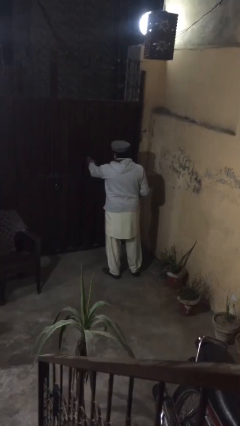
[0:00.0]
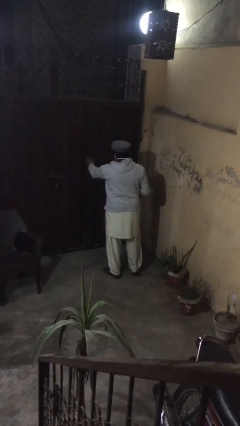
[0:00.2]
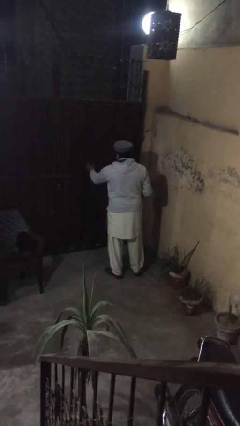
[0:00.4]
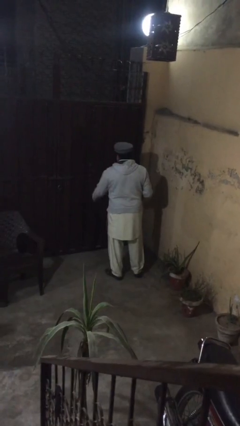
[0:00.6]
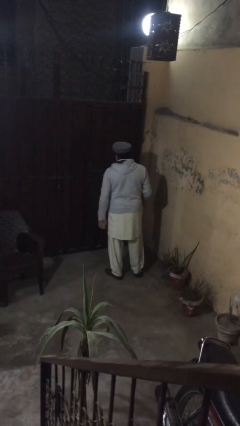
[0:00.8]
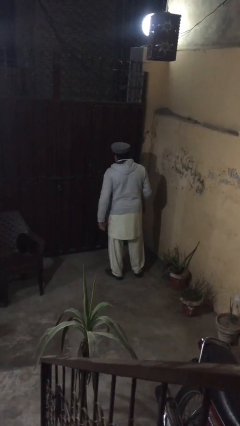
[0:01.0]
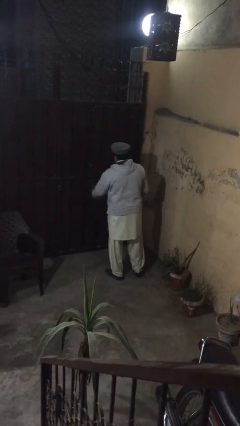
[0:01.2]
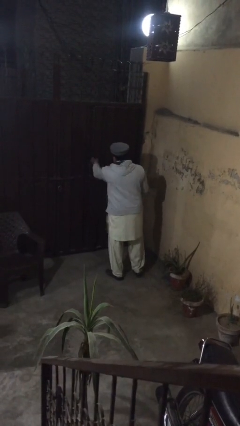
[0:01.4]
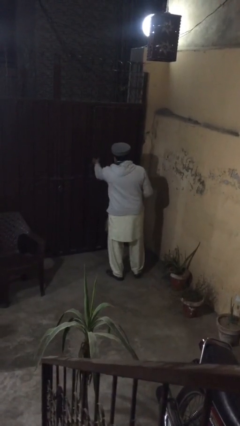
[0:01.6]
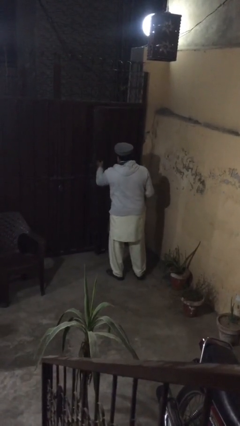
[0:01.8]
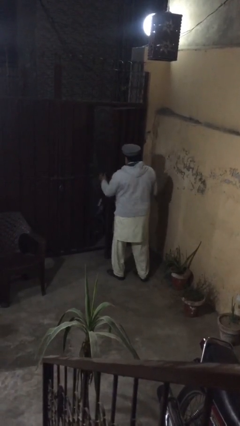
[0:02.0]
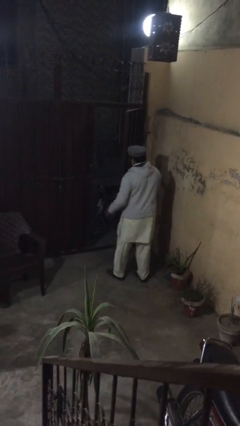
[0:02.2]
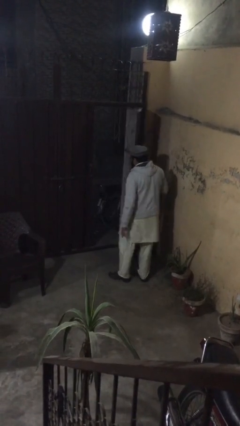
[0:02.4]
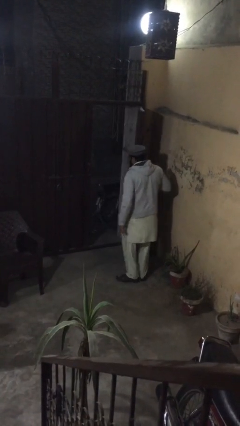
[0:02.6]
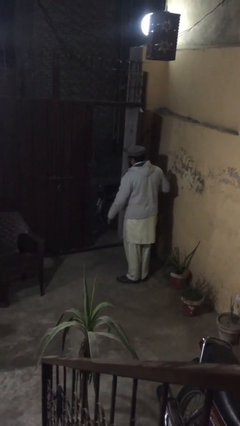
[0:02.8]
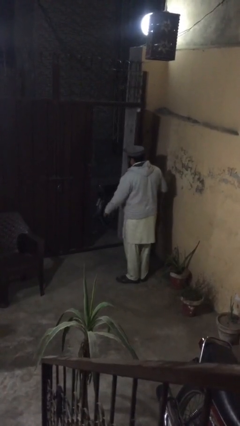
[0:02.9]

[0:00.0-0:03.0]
person opens facility door

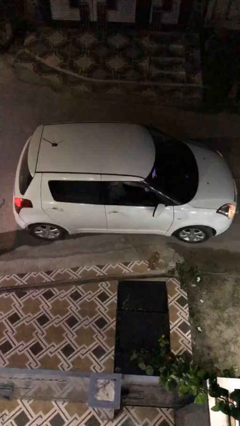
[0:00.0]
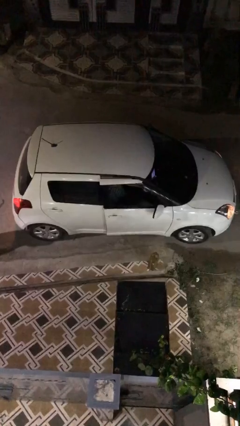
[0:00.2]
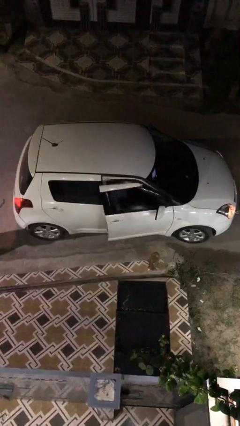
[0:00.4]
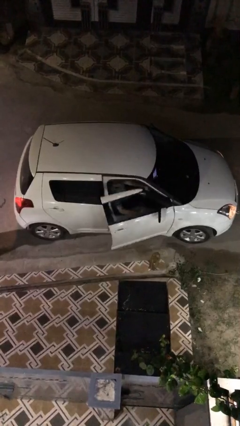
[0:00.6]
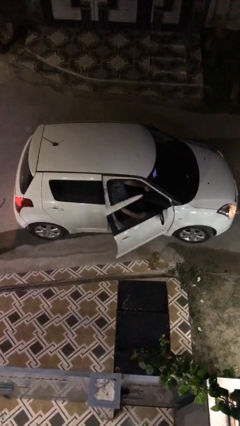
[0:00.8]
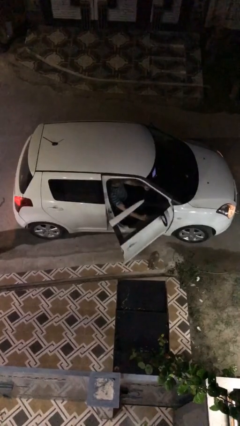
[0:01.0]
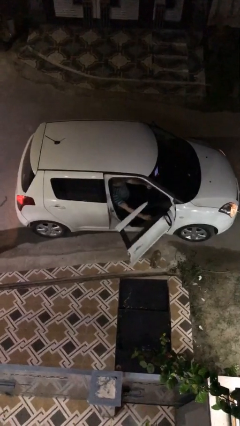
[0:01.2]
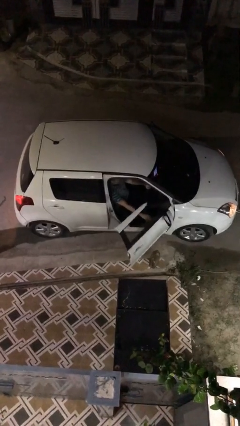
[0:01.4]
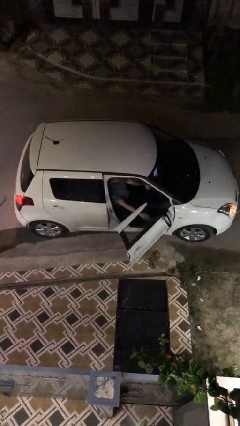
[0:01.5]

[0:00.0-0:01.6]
person opens car door

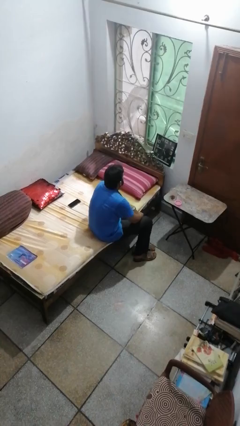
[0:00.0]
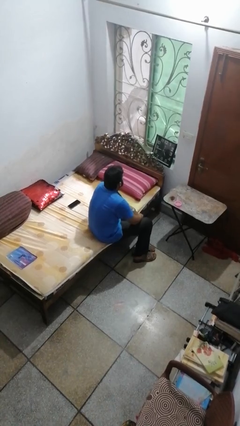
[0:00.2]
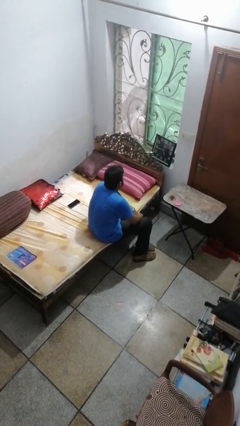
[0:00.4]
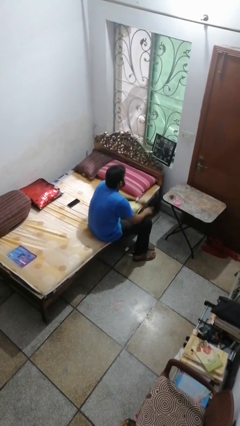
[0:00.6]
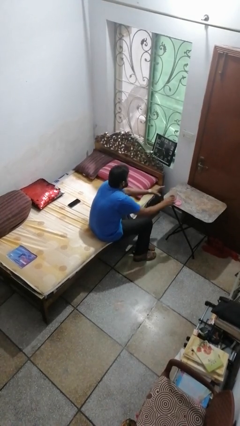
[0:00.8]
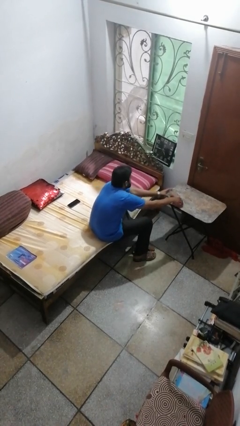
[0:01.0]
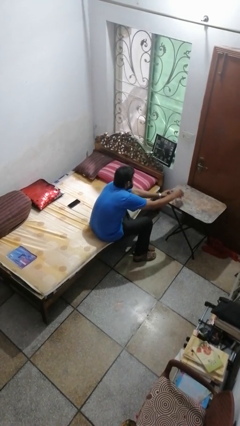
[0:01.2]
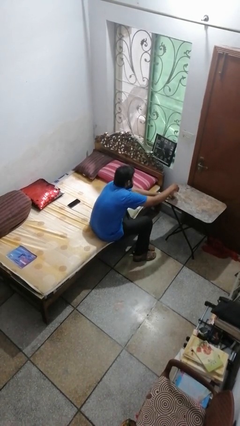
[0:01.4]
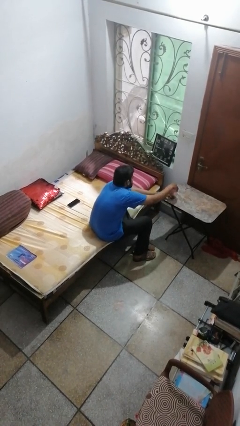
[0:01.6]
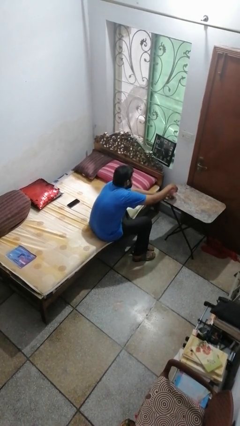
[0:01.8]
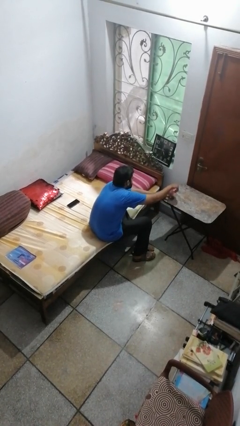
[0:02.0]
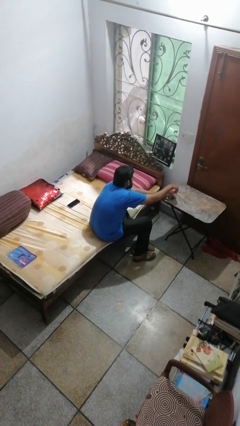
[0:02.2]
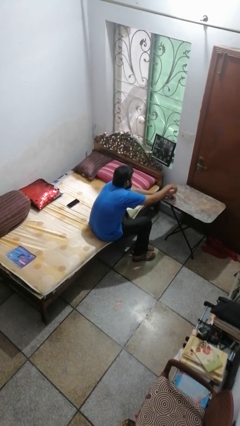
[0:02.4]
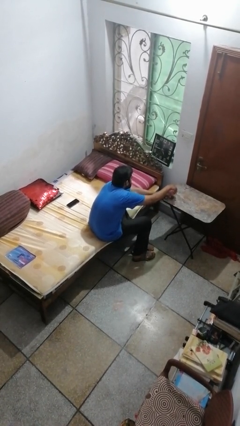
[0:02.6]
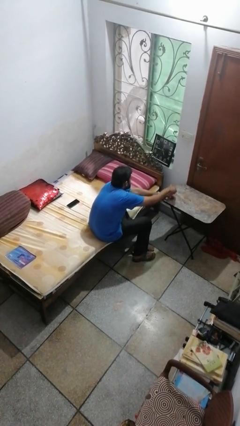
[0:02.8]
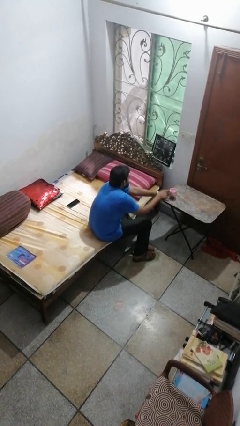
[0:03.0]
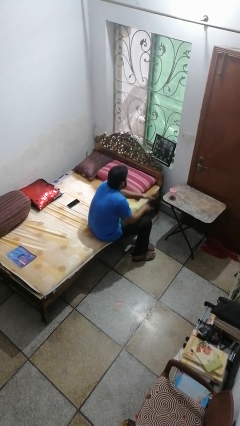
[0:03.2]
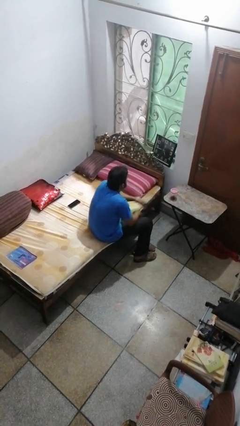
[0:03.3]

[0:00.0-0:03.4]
person closes jar

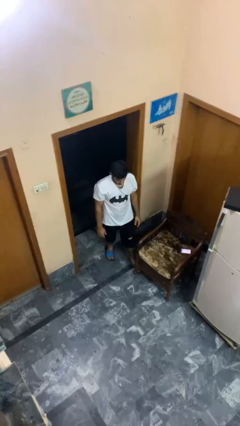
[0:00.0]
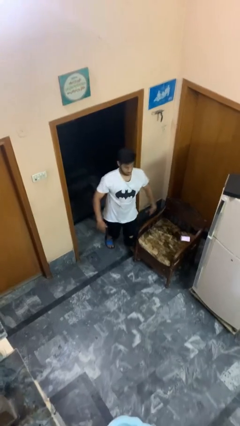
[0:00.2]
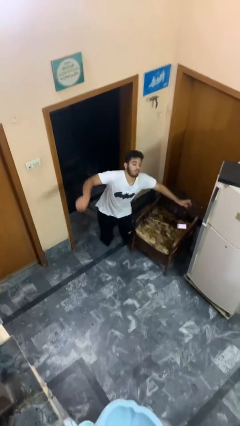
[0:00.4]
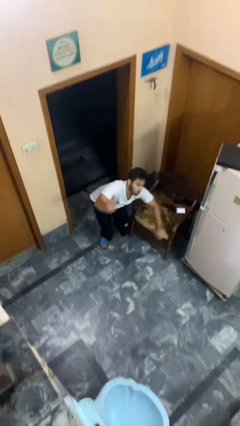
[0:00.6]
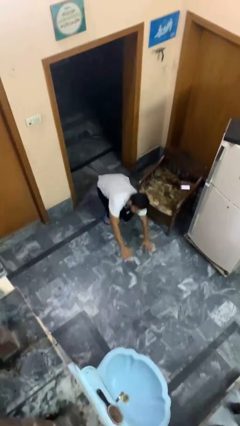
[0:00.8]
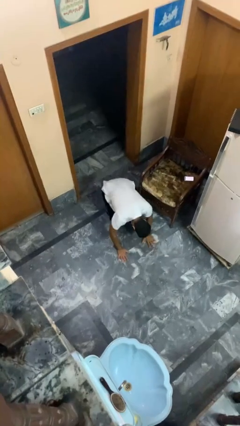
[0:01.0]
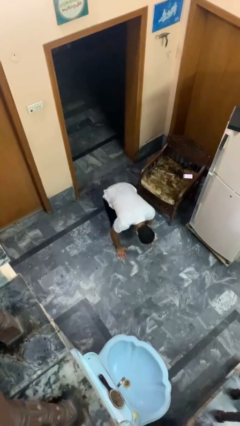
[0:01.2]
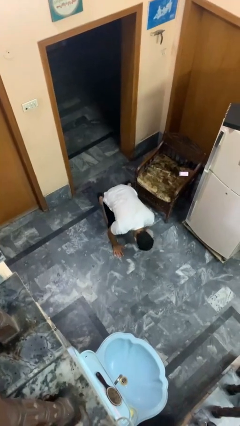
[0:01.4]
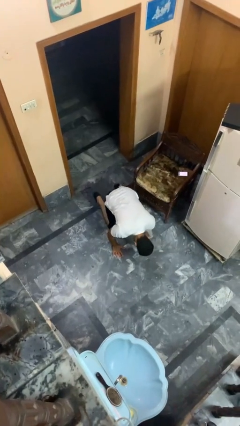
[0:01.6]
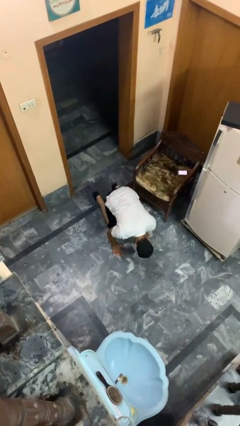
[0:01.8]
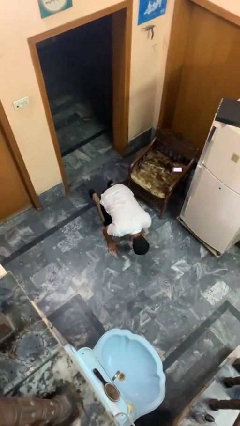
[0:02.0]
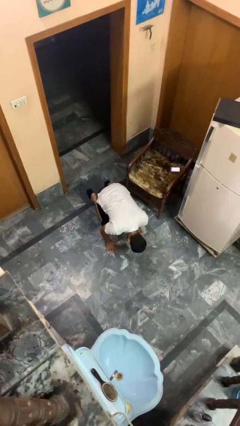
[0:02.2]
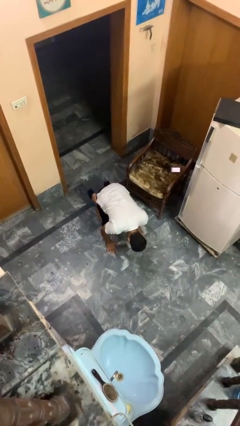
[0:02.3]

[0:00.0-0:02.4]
person trips on object on floor

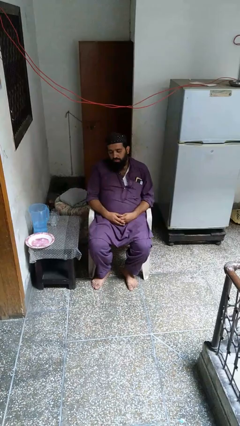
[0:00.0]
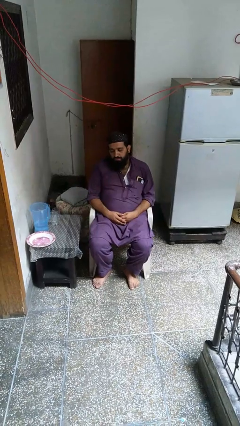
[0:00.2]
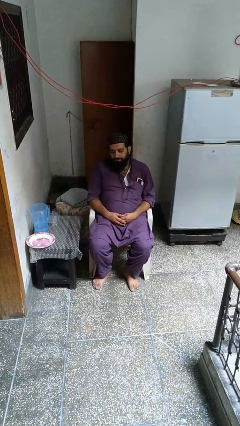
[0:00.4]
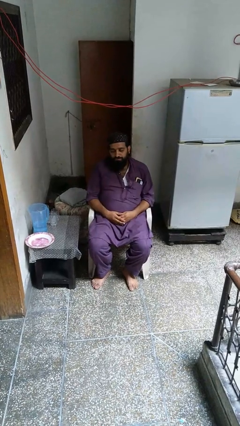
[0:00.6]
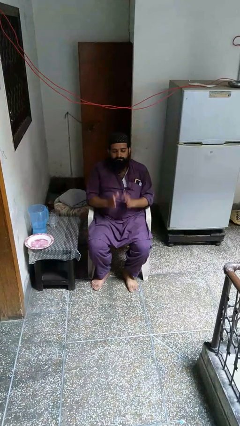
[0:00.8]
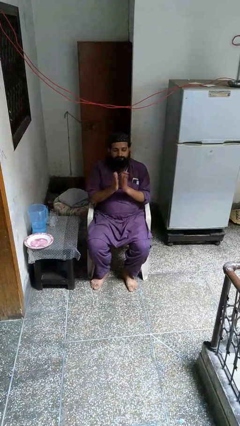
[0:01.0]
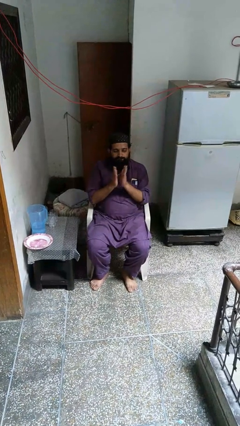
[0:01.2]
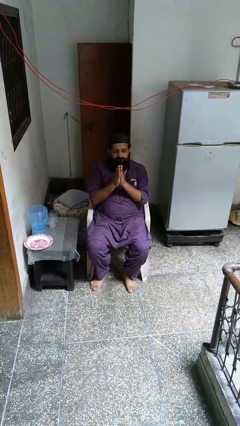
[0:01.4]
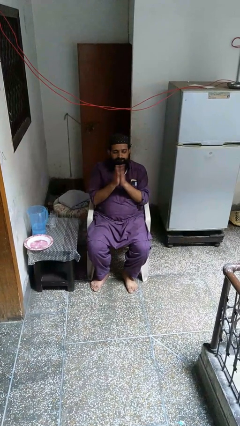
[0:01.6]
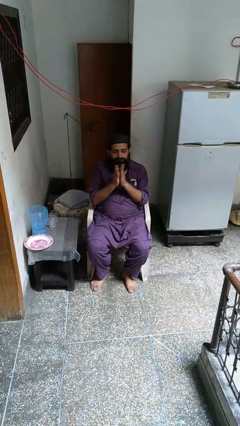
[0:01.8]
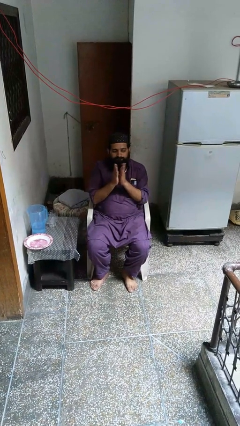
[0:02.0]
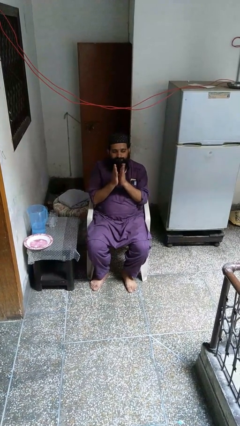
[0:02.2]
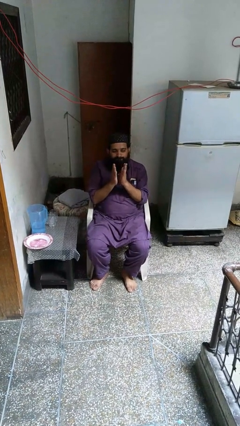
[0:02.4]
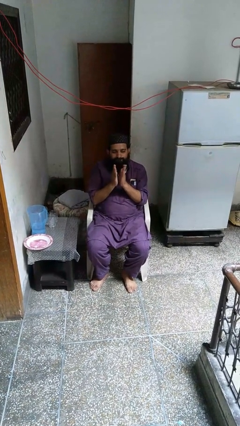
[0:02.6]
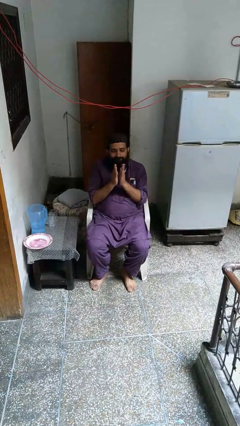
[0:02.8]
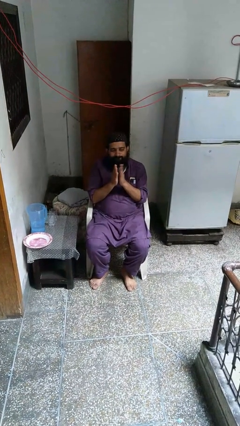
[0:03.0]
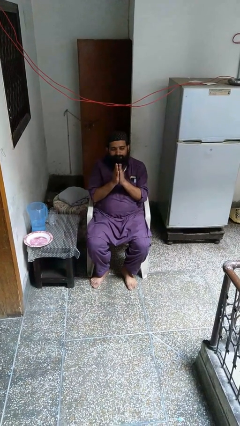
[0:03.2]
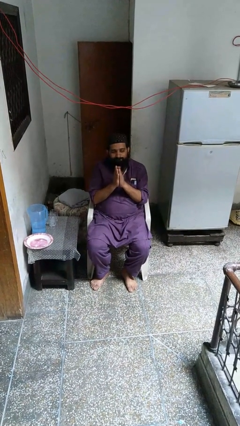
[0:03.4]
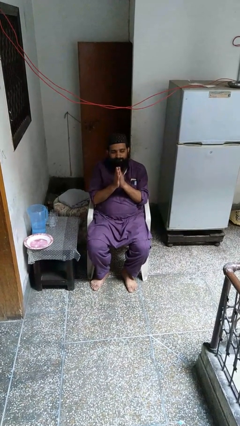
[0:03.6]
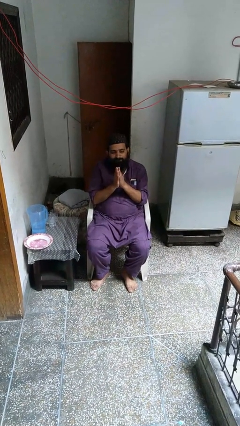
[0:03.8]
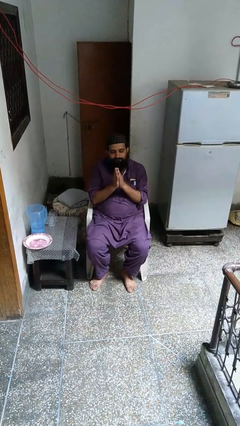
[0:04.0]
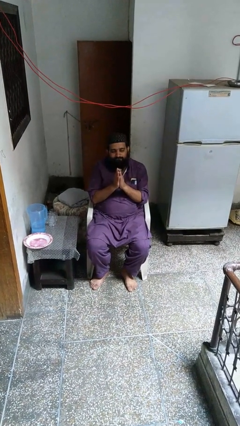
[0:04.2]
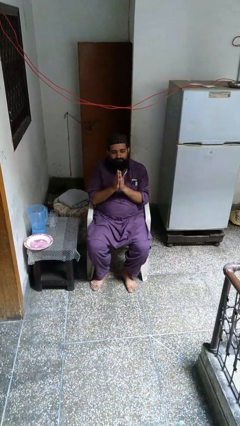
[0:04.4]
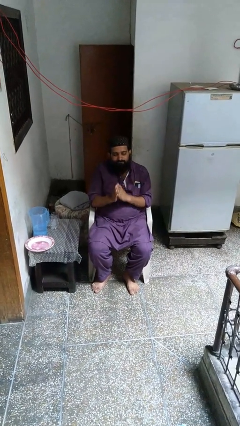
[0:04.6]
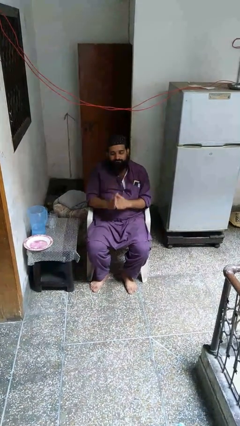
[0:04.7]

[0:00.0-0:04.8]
person claps hands

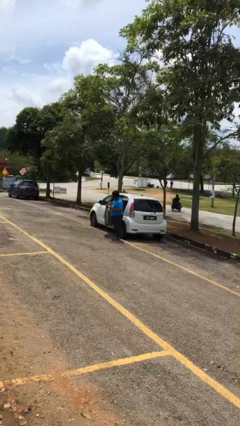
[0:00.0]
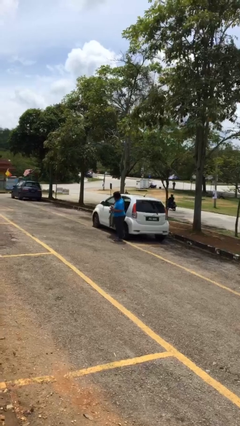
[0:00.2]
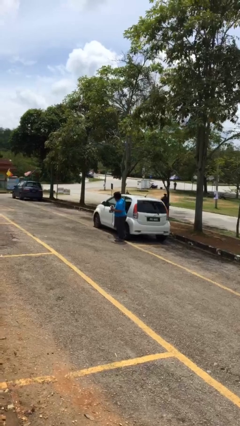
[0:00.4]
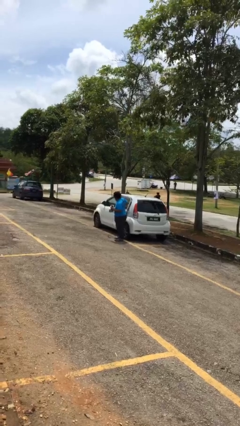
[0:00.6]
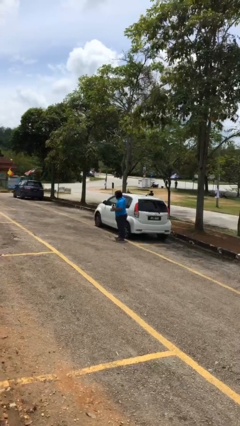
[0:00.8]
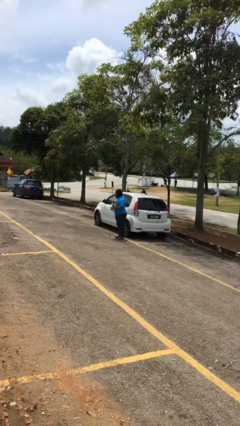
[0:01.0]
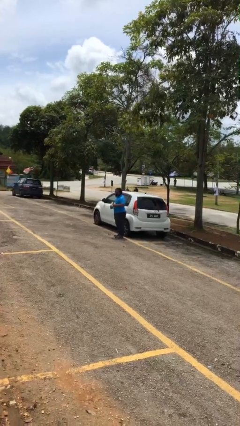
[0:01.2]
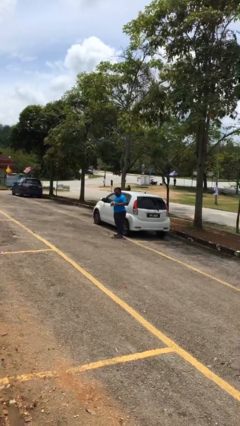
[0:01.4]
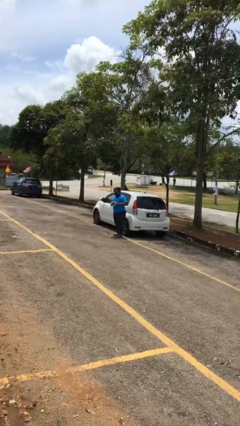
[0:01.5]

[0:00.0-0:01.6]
person closes car door

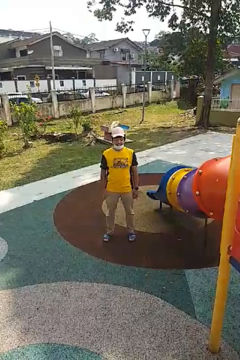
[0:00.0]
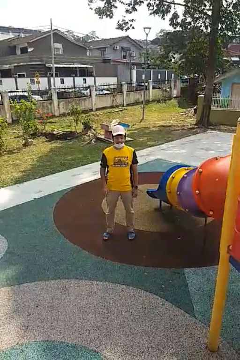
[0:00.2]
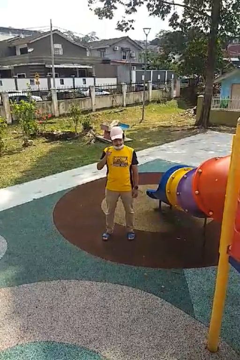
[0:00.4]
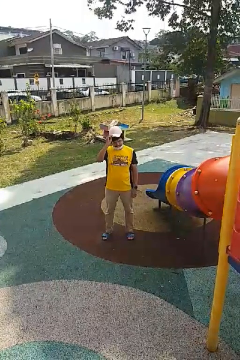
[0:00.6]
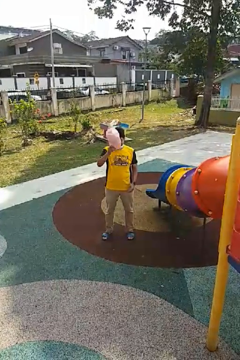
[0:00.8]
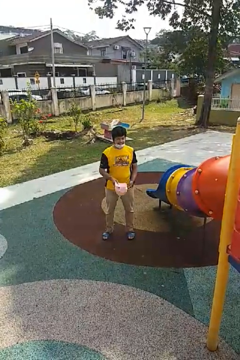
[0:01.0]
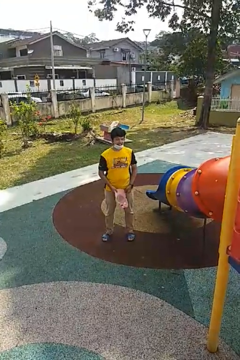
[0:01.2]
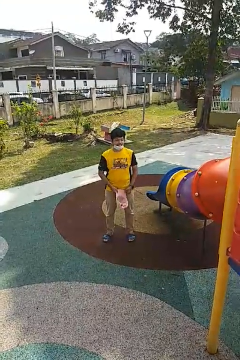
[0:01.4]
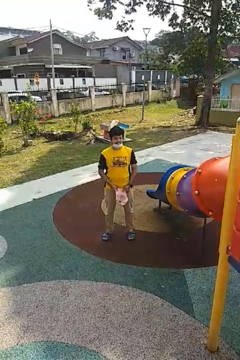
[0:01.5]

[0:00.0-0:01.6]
person takes off hat
